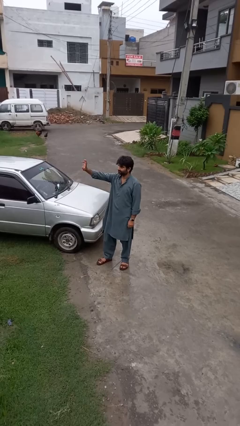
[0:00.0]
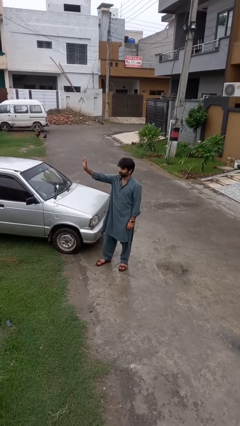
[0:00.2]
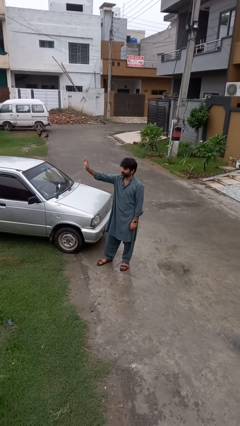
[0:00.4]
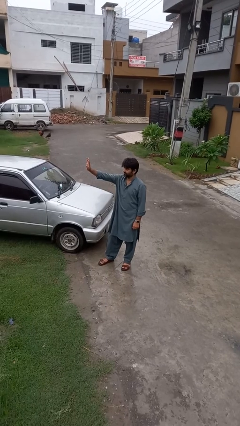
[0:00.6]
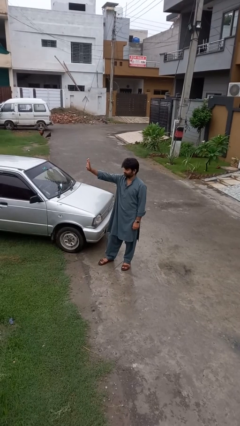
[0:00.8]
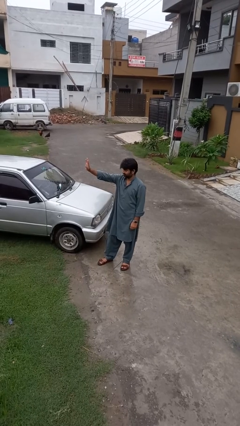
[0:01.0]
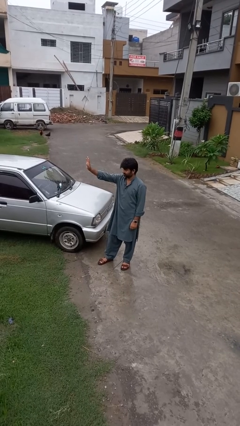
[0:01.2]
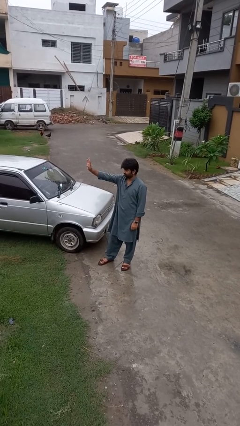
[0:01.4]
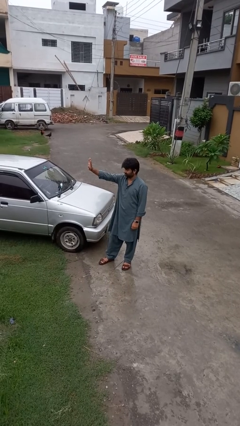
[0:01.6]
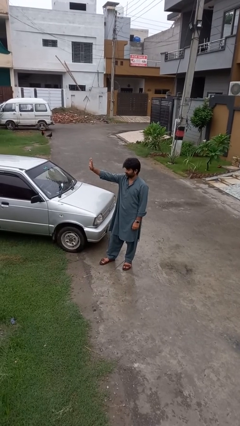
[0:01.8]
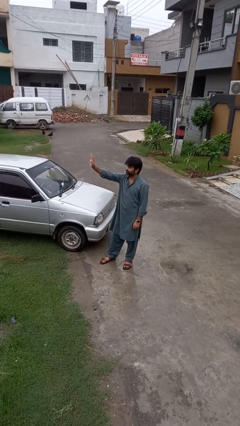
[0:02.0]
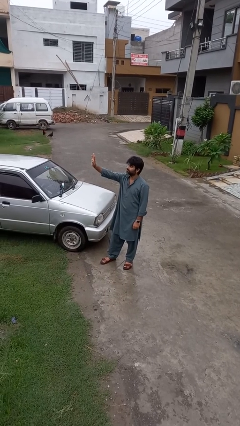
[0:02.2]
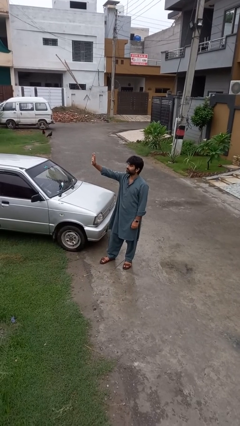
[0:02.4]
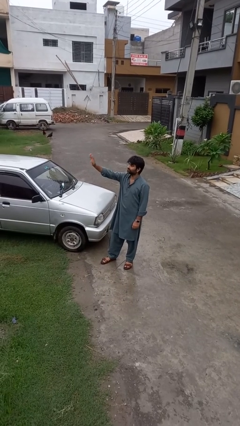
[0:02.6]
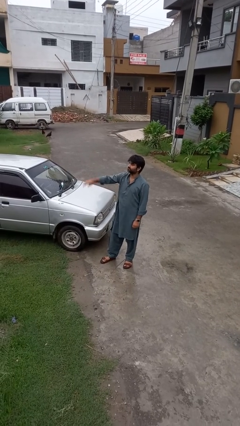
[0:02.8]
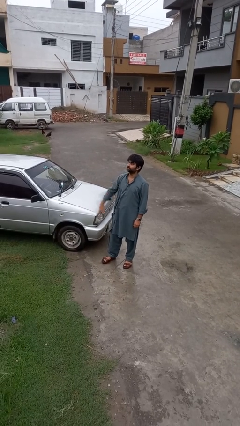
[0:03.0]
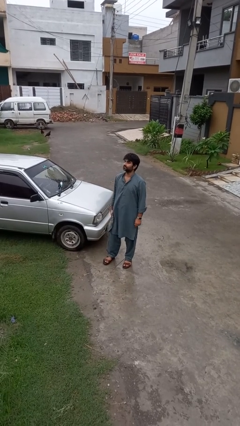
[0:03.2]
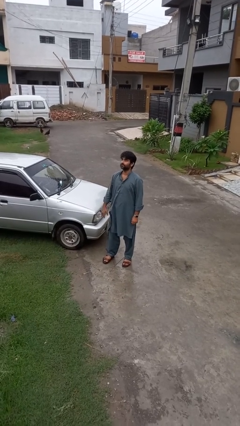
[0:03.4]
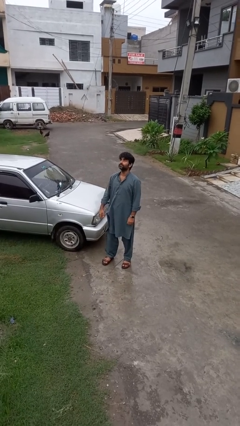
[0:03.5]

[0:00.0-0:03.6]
person waves at person

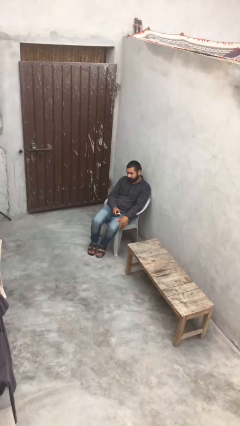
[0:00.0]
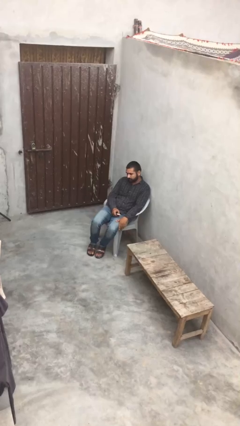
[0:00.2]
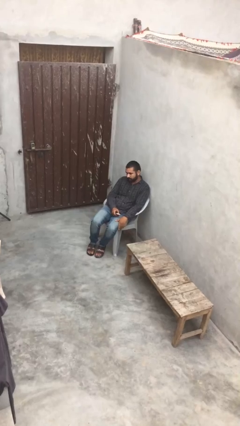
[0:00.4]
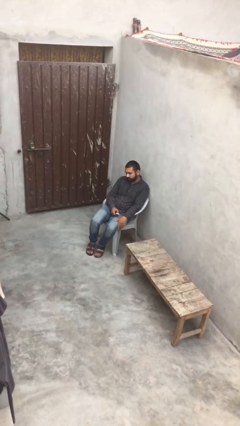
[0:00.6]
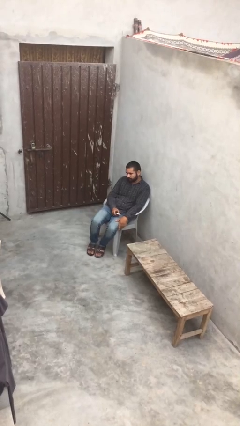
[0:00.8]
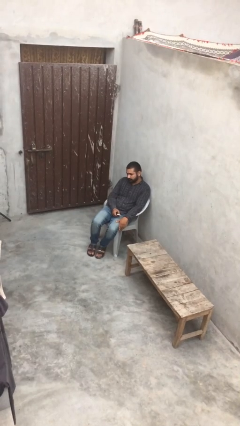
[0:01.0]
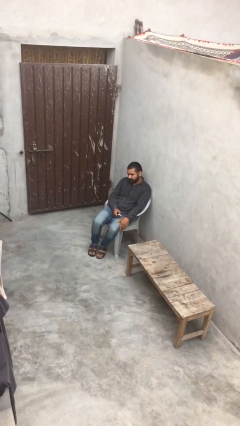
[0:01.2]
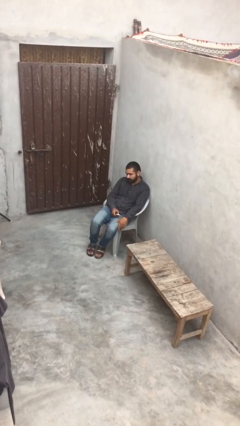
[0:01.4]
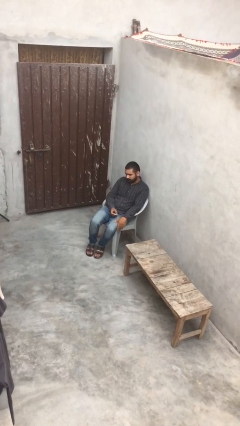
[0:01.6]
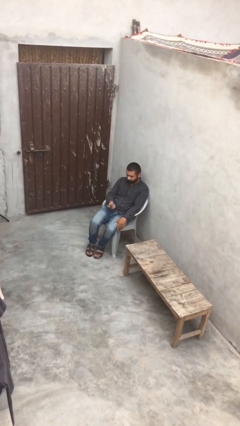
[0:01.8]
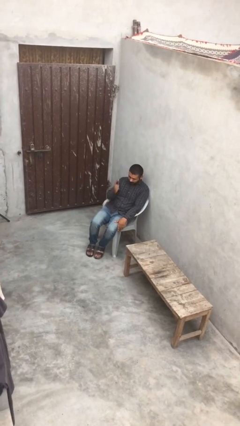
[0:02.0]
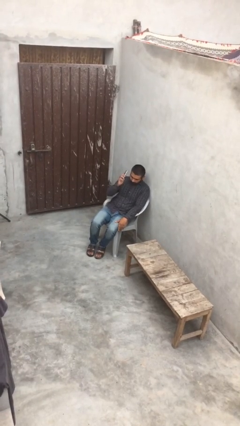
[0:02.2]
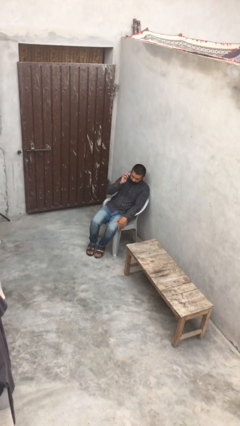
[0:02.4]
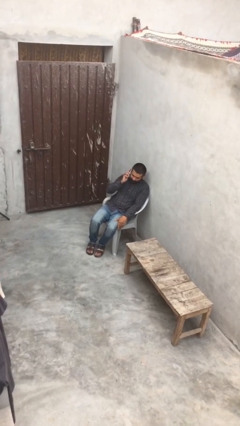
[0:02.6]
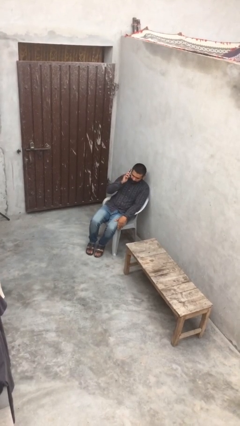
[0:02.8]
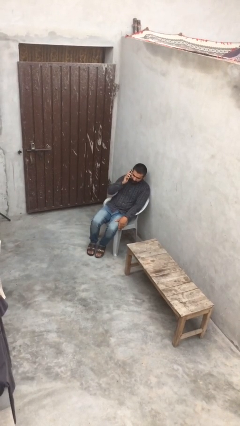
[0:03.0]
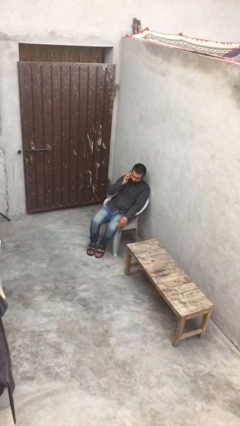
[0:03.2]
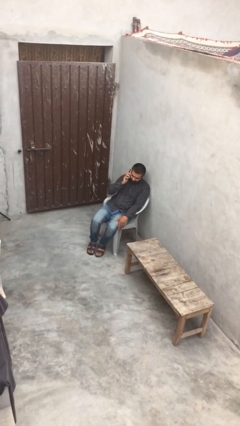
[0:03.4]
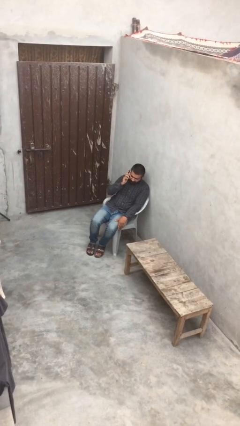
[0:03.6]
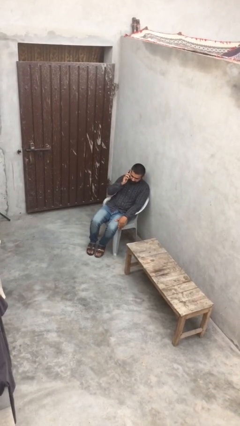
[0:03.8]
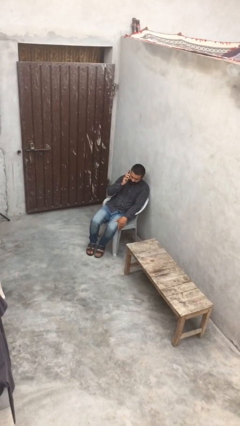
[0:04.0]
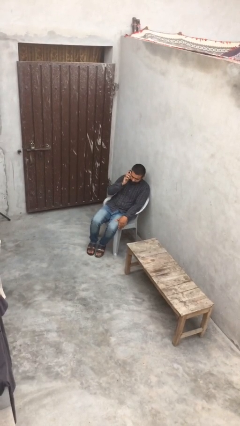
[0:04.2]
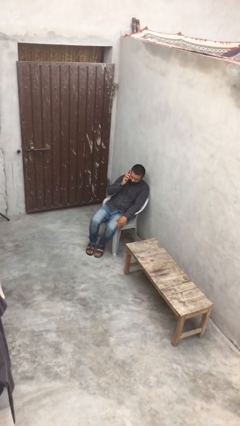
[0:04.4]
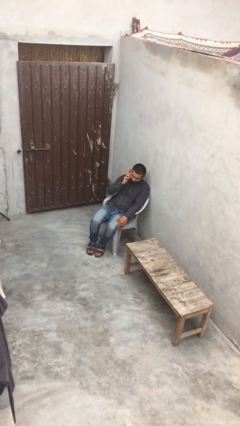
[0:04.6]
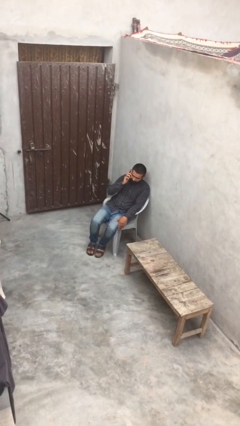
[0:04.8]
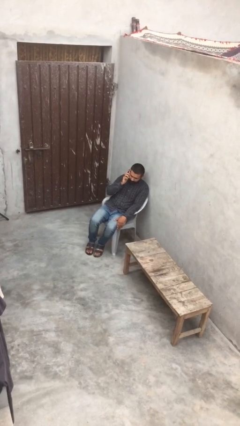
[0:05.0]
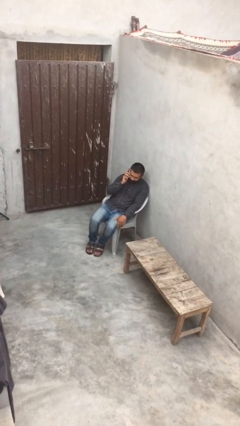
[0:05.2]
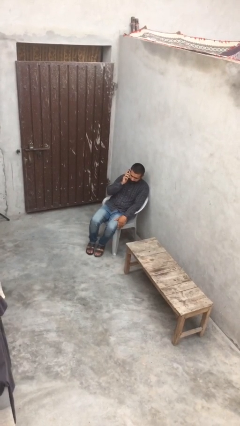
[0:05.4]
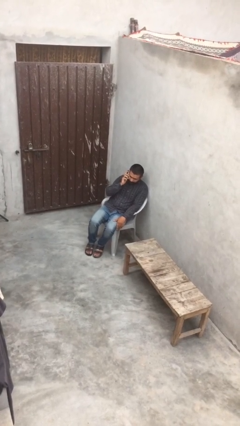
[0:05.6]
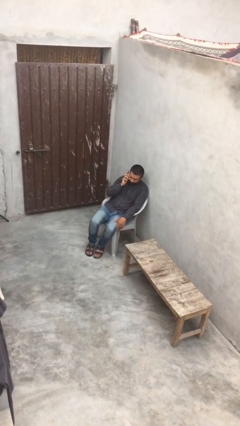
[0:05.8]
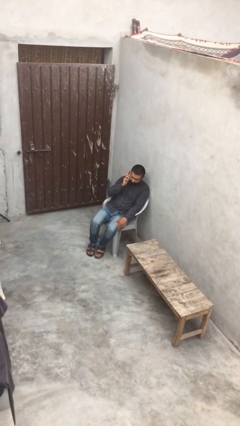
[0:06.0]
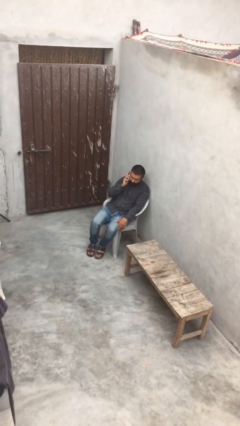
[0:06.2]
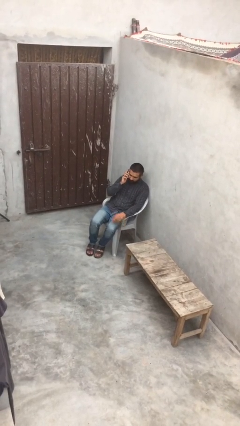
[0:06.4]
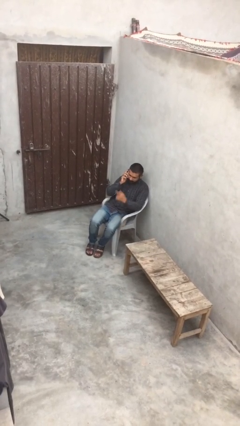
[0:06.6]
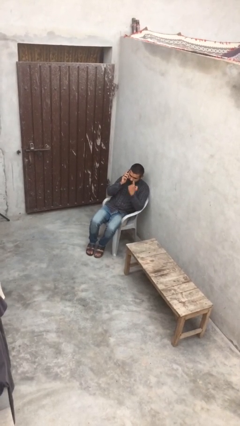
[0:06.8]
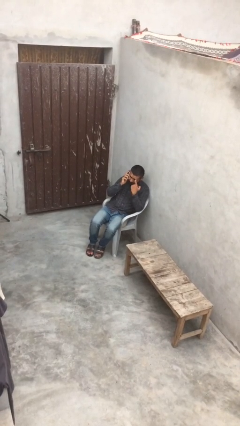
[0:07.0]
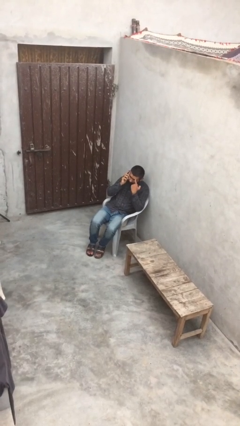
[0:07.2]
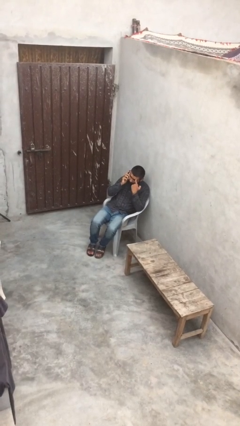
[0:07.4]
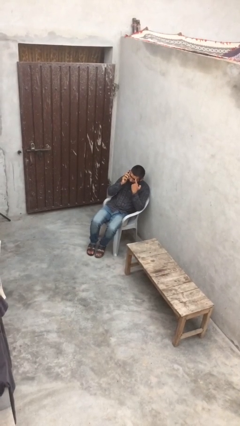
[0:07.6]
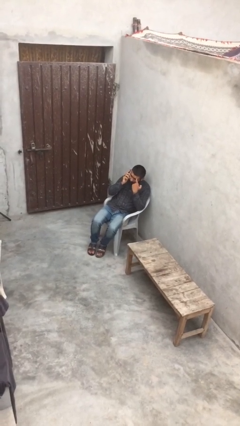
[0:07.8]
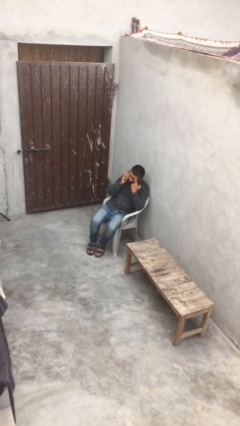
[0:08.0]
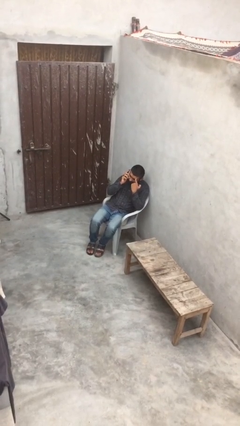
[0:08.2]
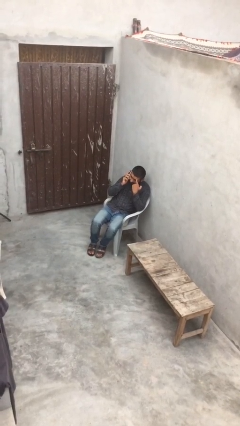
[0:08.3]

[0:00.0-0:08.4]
person talks on phone

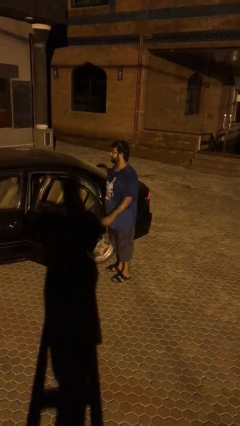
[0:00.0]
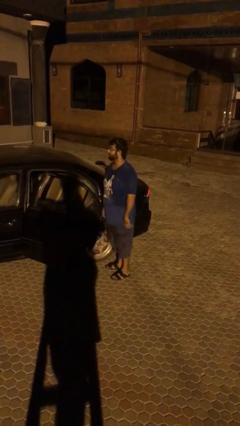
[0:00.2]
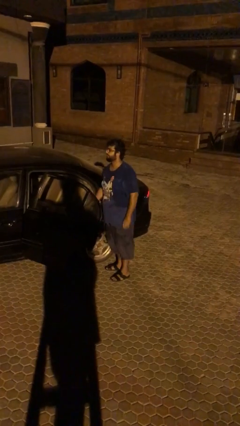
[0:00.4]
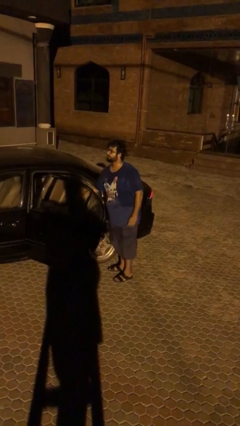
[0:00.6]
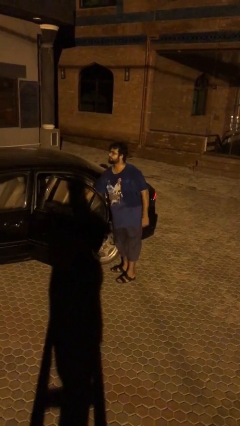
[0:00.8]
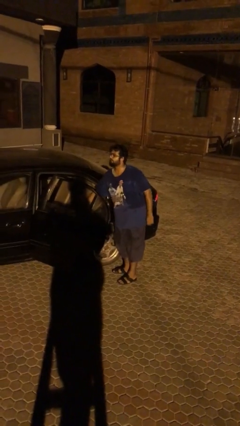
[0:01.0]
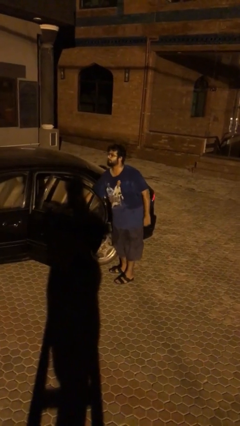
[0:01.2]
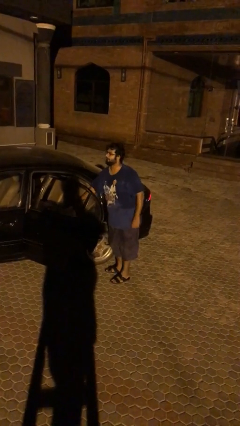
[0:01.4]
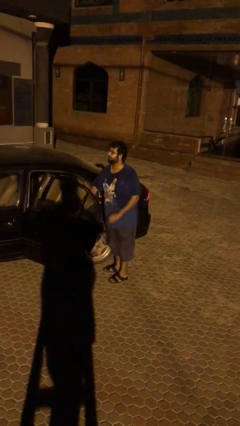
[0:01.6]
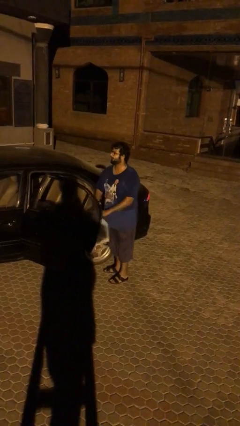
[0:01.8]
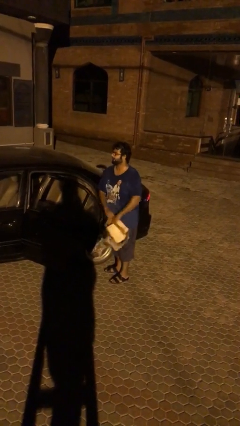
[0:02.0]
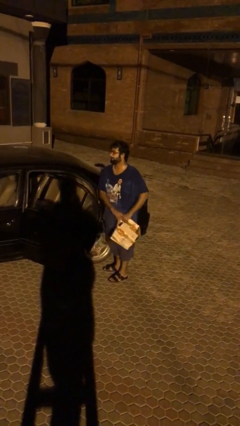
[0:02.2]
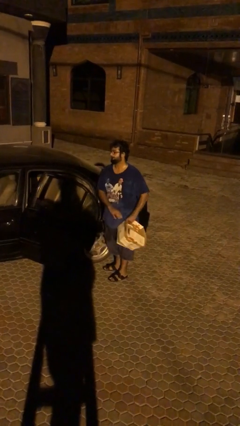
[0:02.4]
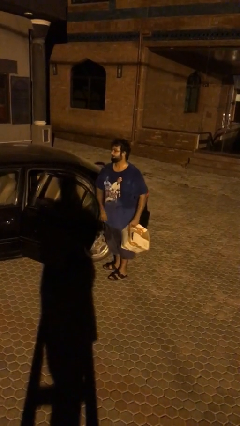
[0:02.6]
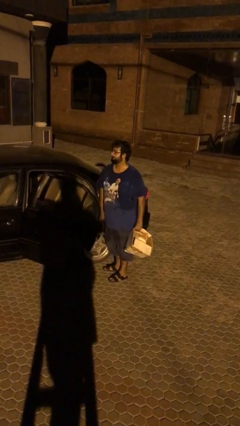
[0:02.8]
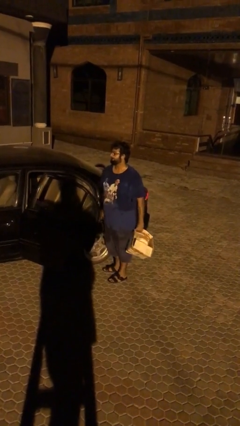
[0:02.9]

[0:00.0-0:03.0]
person unloads car

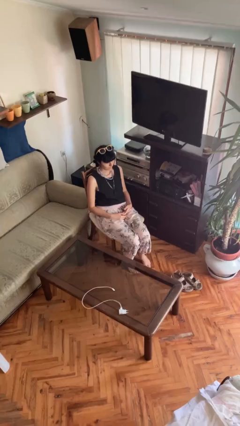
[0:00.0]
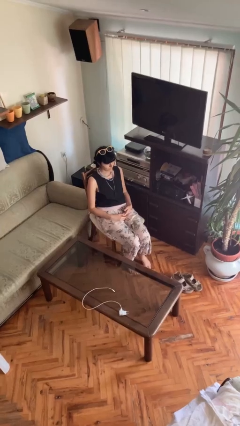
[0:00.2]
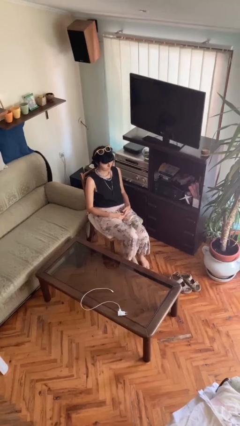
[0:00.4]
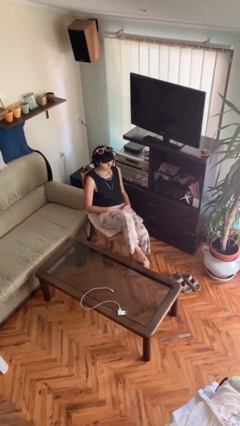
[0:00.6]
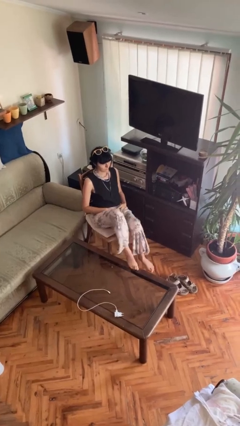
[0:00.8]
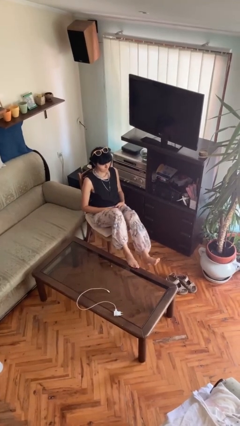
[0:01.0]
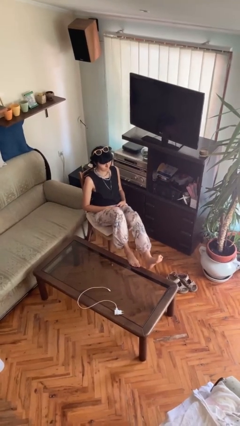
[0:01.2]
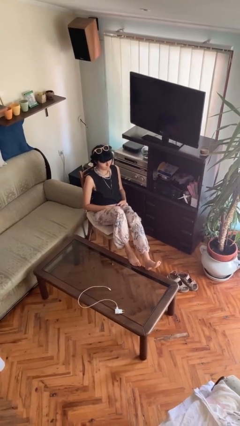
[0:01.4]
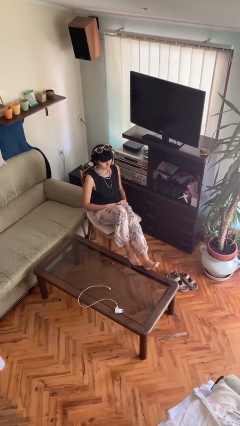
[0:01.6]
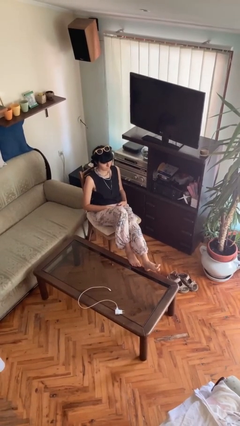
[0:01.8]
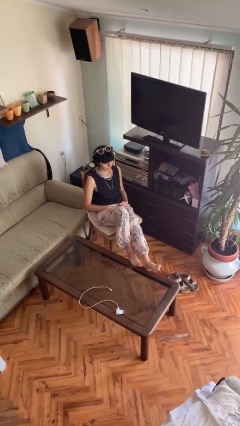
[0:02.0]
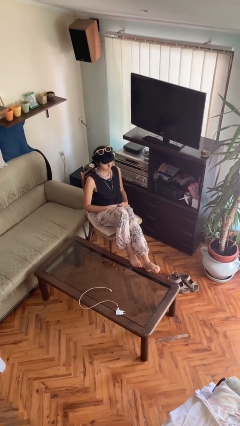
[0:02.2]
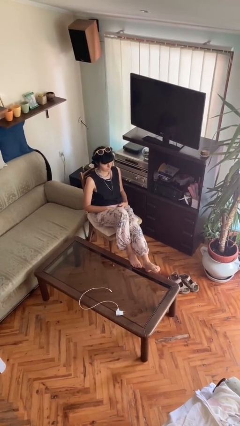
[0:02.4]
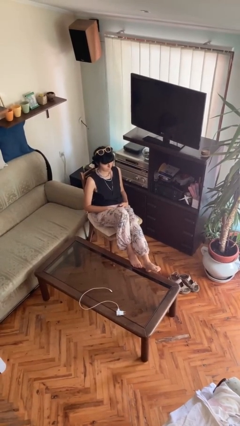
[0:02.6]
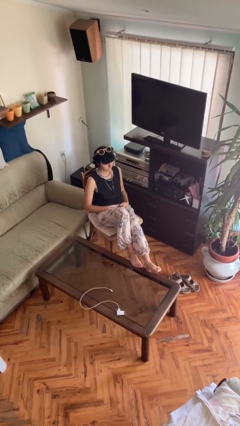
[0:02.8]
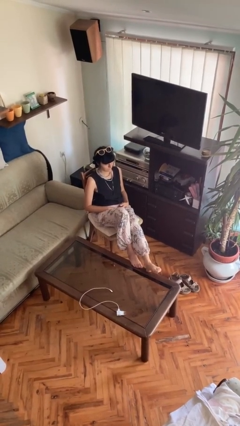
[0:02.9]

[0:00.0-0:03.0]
person puts feet up
